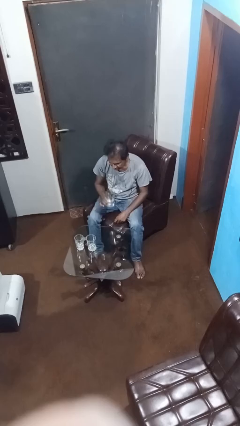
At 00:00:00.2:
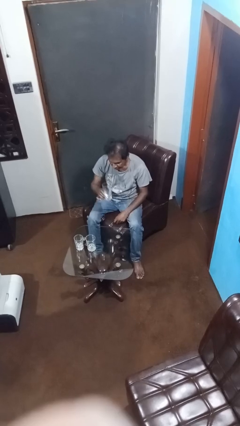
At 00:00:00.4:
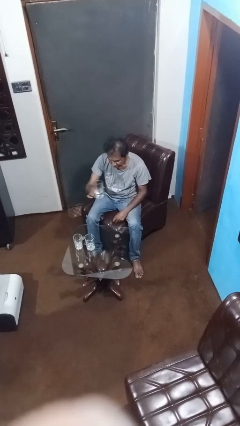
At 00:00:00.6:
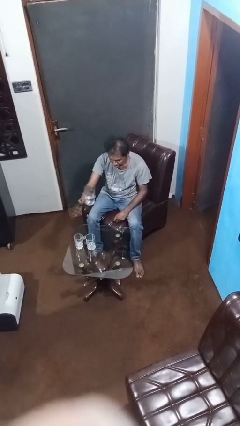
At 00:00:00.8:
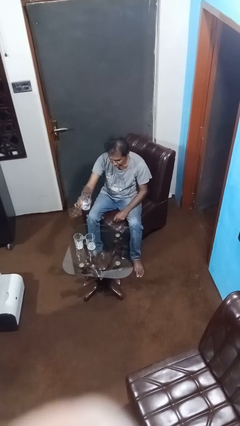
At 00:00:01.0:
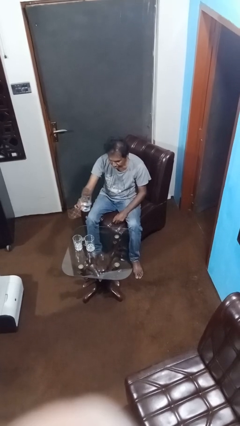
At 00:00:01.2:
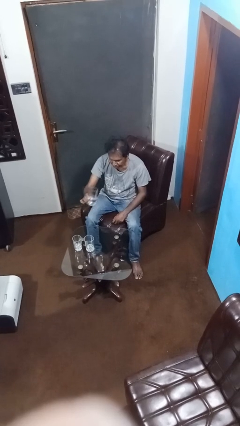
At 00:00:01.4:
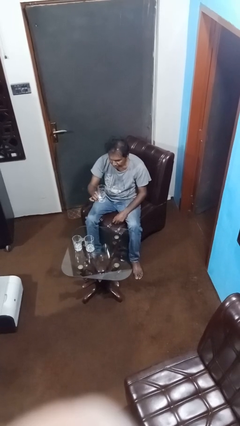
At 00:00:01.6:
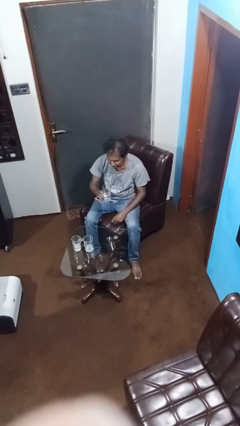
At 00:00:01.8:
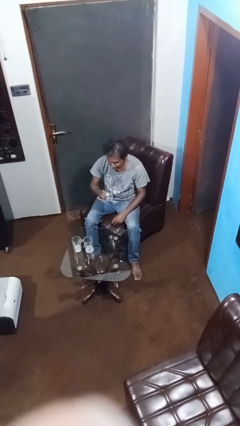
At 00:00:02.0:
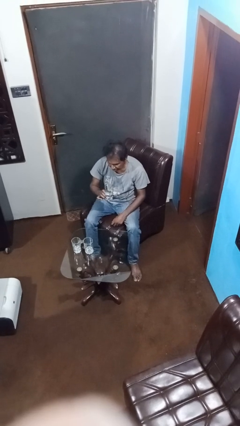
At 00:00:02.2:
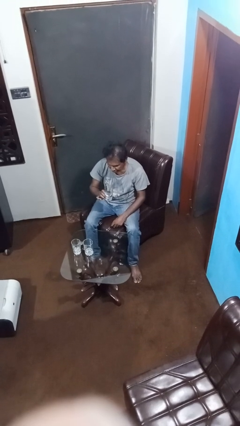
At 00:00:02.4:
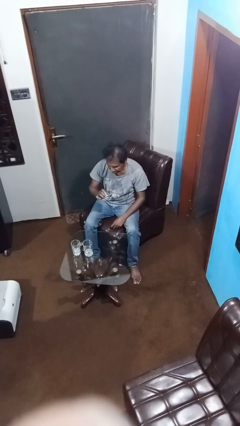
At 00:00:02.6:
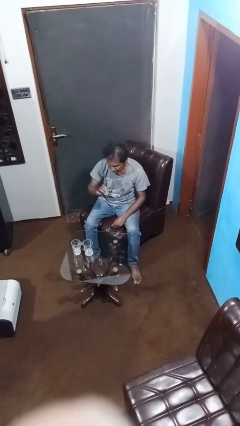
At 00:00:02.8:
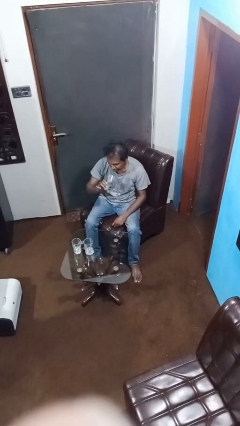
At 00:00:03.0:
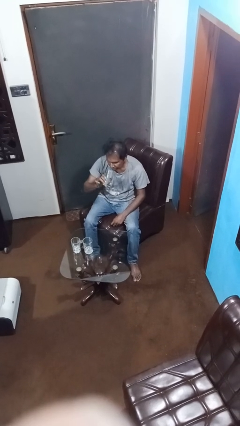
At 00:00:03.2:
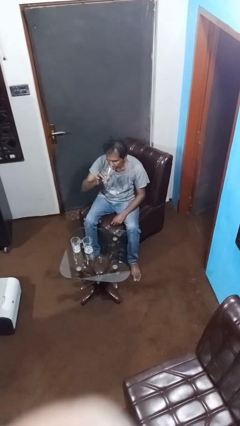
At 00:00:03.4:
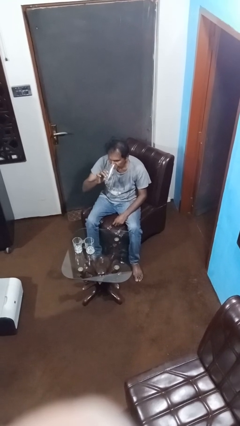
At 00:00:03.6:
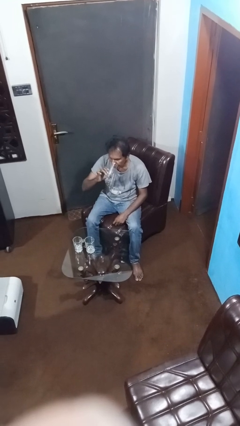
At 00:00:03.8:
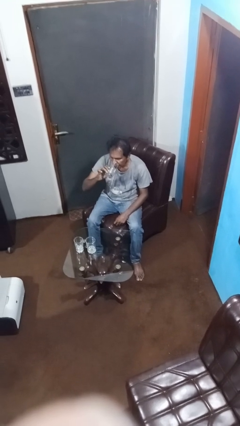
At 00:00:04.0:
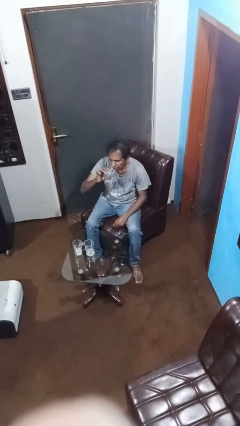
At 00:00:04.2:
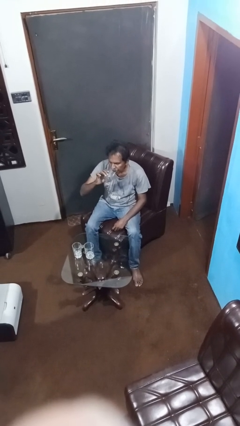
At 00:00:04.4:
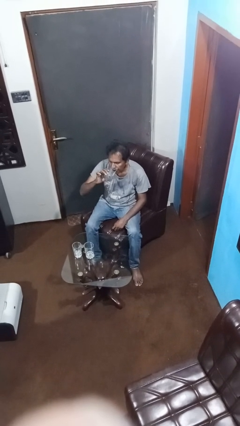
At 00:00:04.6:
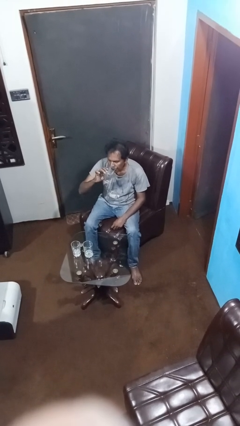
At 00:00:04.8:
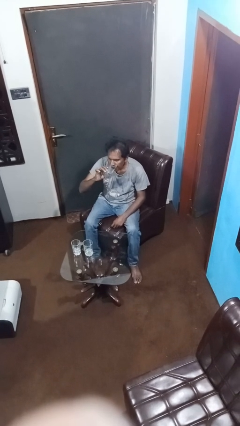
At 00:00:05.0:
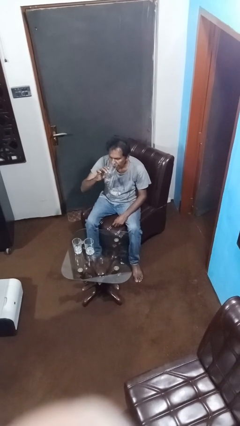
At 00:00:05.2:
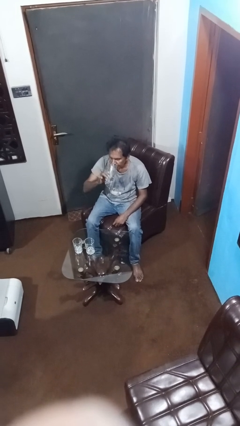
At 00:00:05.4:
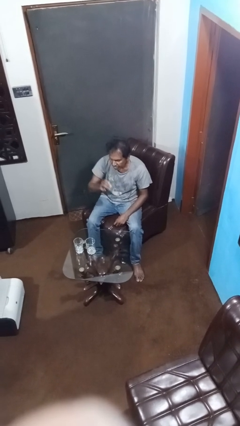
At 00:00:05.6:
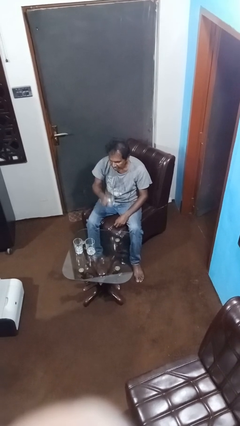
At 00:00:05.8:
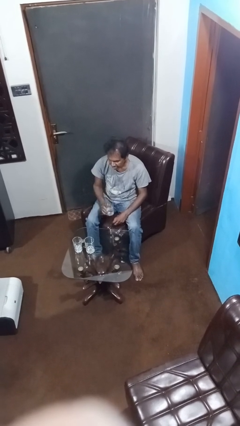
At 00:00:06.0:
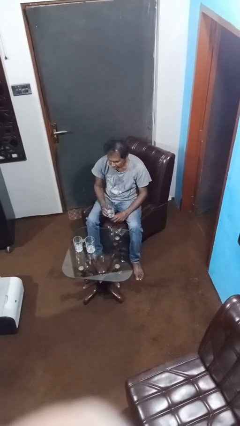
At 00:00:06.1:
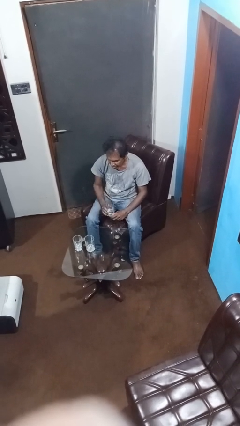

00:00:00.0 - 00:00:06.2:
person drinks from shotglass

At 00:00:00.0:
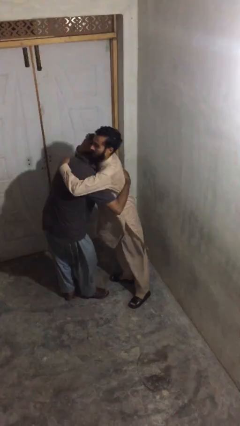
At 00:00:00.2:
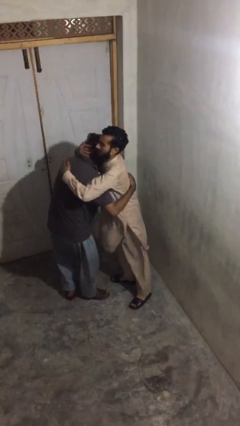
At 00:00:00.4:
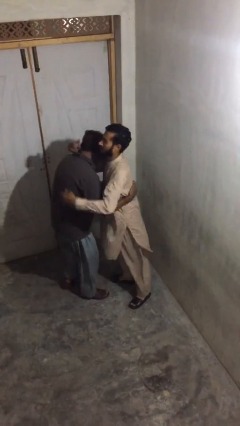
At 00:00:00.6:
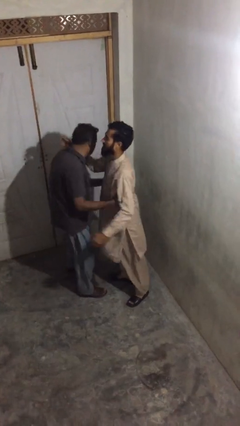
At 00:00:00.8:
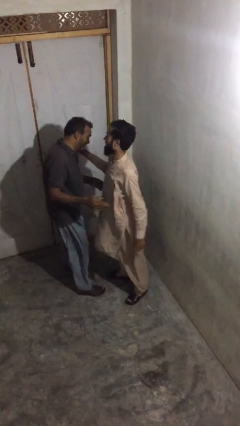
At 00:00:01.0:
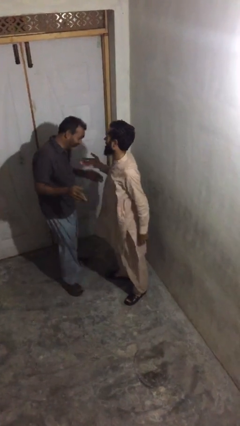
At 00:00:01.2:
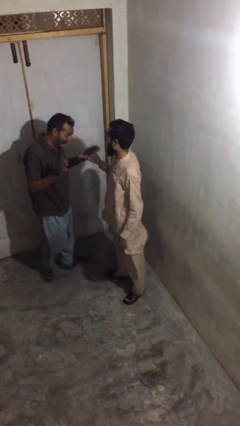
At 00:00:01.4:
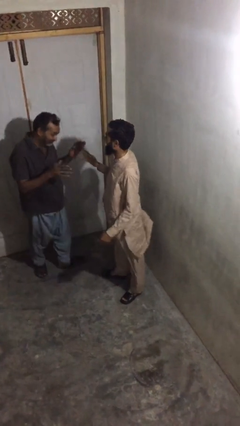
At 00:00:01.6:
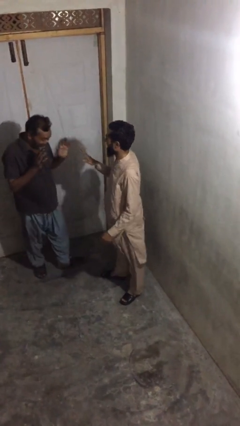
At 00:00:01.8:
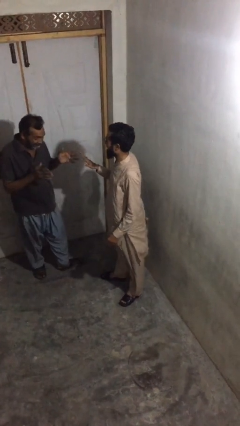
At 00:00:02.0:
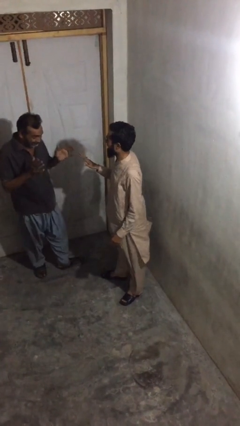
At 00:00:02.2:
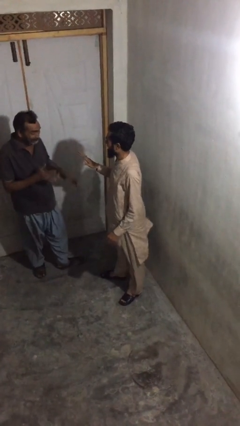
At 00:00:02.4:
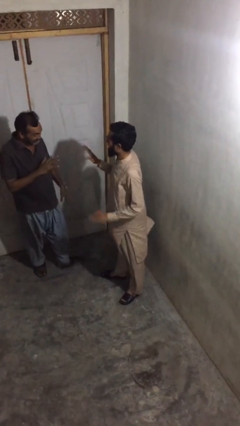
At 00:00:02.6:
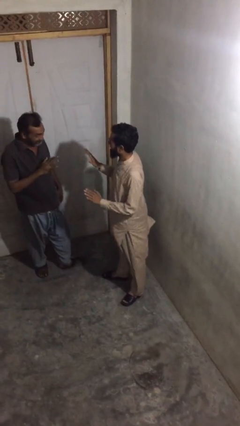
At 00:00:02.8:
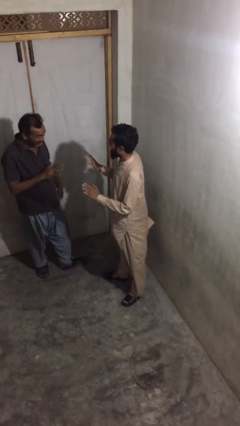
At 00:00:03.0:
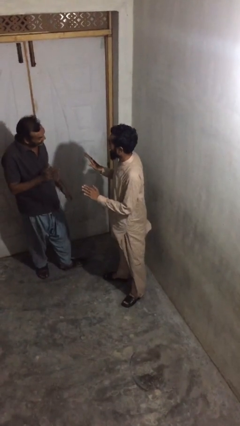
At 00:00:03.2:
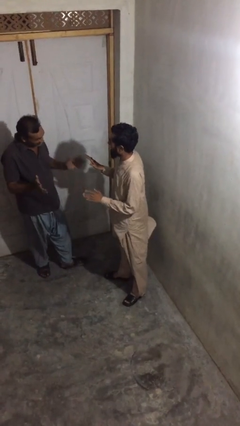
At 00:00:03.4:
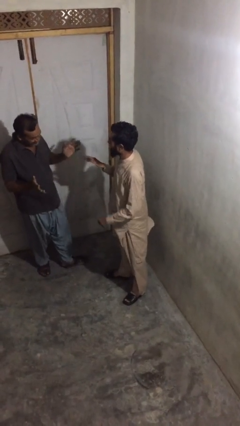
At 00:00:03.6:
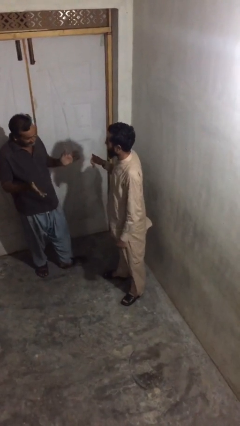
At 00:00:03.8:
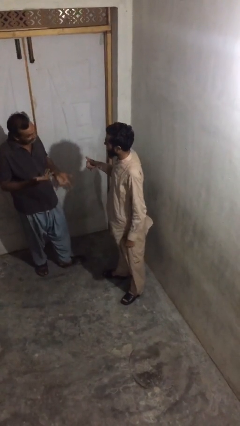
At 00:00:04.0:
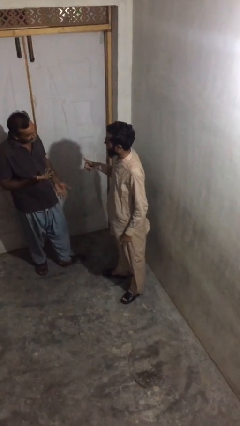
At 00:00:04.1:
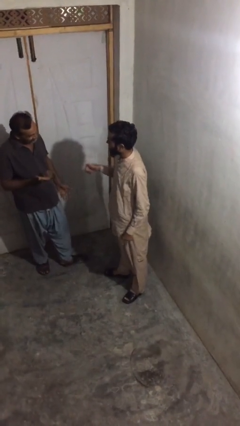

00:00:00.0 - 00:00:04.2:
person talks to person

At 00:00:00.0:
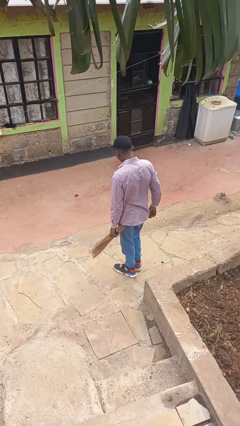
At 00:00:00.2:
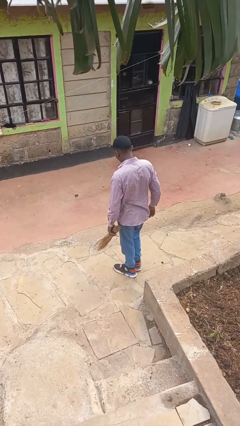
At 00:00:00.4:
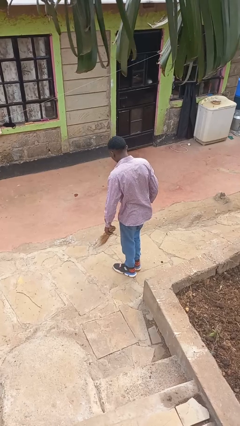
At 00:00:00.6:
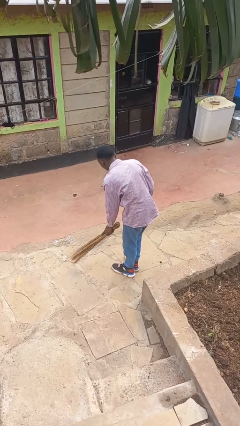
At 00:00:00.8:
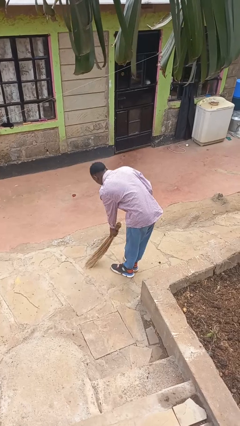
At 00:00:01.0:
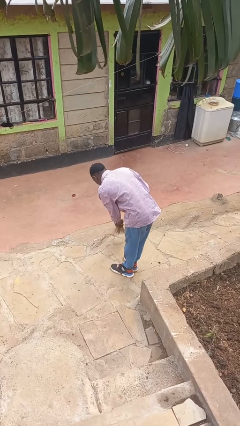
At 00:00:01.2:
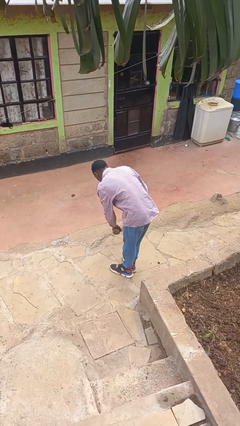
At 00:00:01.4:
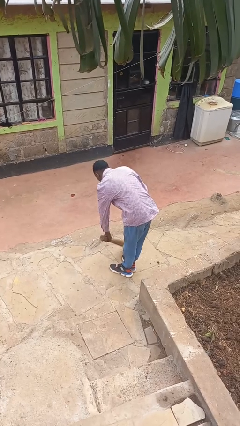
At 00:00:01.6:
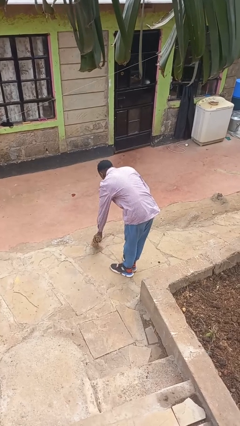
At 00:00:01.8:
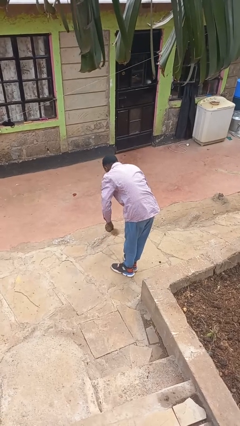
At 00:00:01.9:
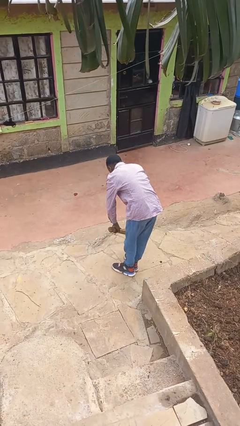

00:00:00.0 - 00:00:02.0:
person sweeps floor

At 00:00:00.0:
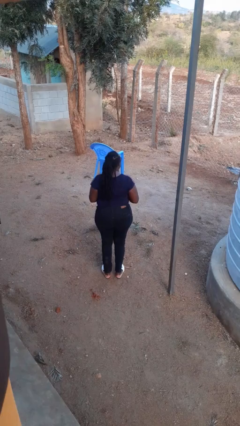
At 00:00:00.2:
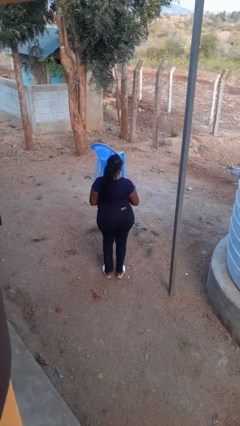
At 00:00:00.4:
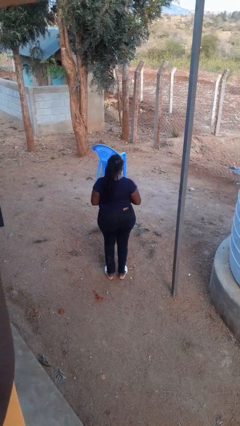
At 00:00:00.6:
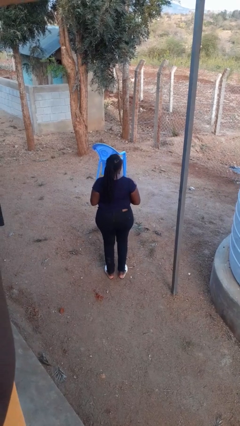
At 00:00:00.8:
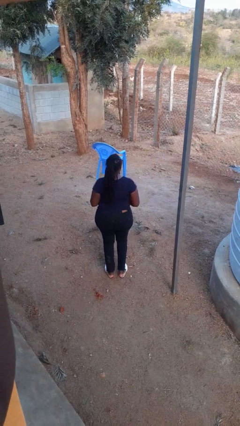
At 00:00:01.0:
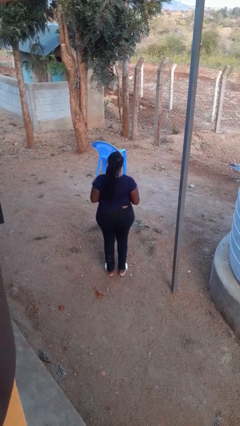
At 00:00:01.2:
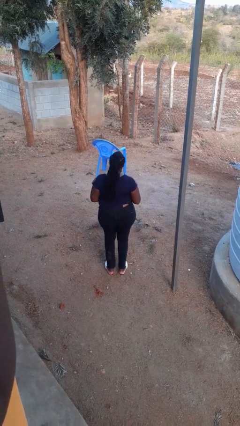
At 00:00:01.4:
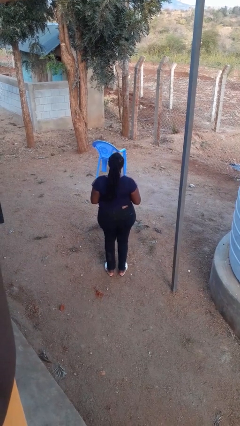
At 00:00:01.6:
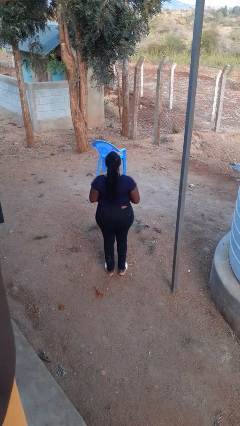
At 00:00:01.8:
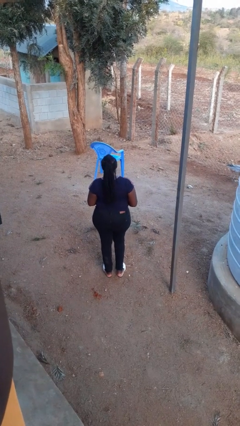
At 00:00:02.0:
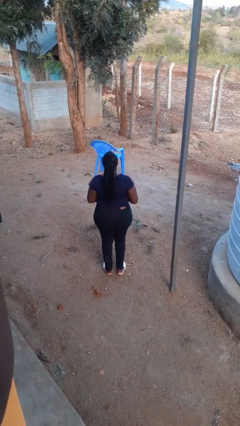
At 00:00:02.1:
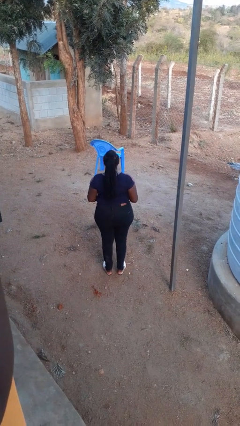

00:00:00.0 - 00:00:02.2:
person wiggles hips

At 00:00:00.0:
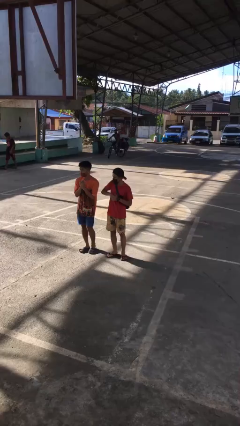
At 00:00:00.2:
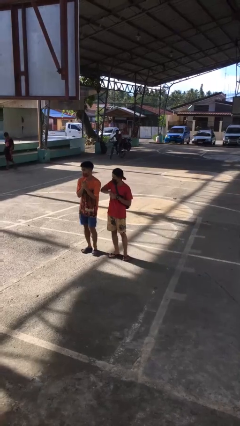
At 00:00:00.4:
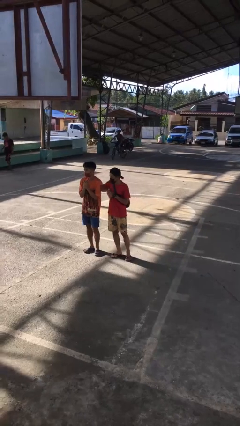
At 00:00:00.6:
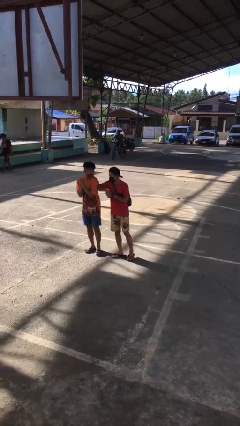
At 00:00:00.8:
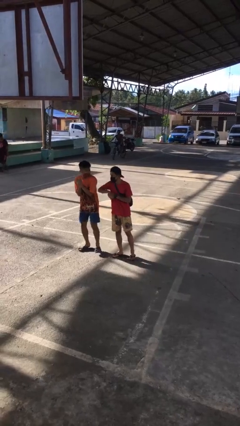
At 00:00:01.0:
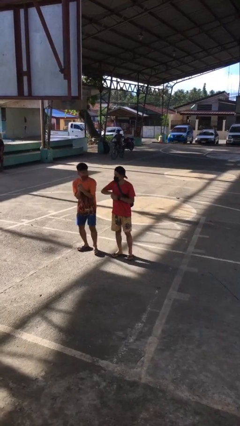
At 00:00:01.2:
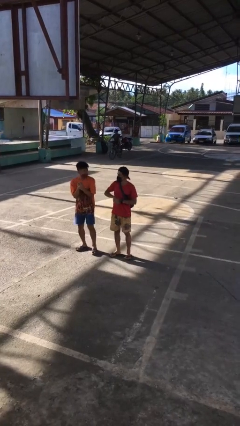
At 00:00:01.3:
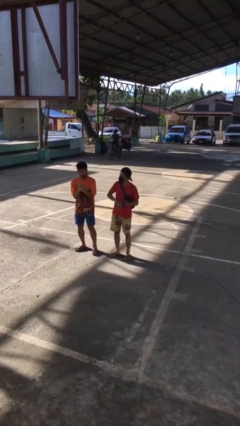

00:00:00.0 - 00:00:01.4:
person nudges person with elbow

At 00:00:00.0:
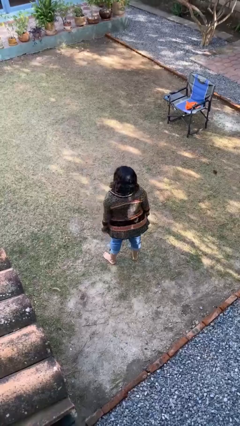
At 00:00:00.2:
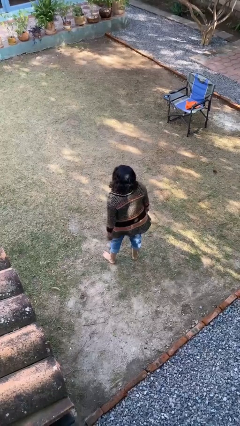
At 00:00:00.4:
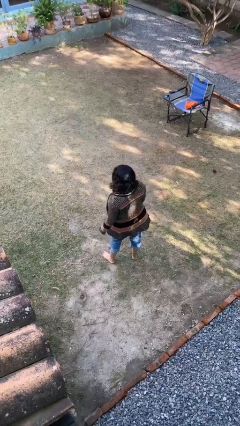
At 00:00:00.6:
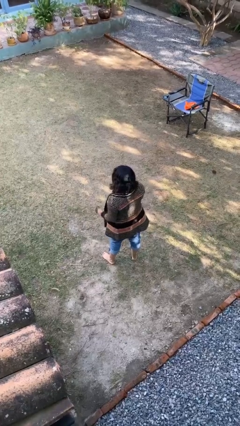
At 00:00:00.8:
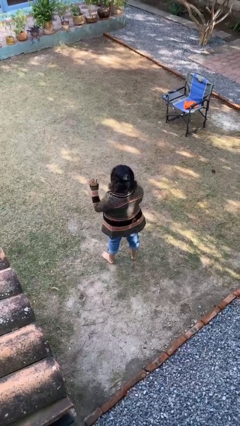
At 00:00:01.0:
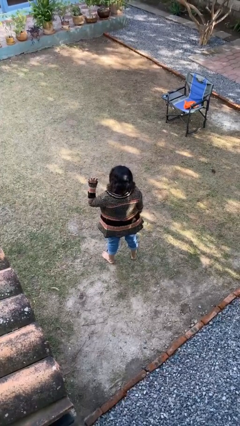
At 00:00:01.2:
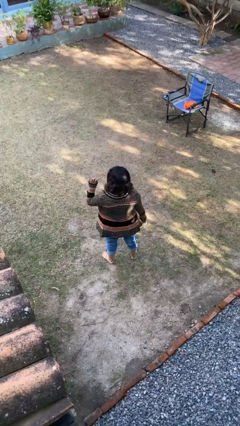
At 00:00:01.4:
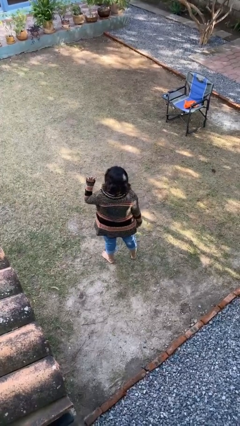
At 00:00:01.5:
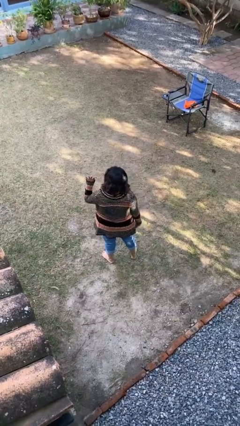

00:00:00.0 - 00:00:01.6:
person gestures number four
